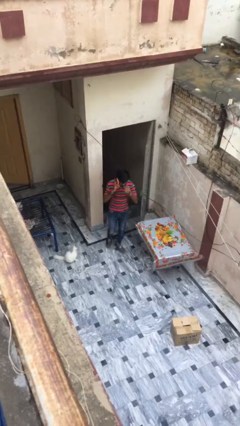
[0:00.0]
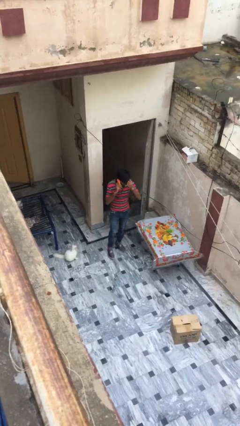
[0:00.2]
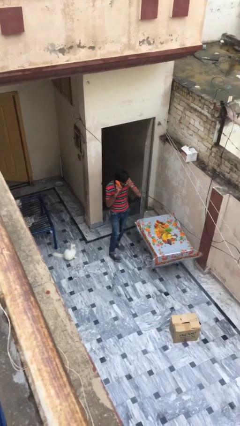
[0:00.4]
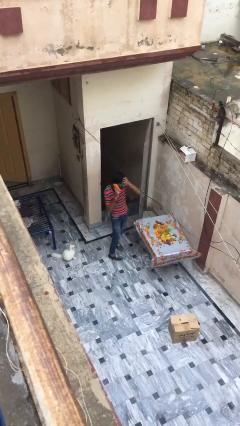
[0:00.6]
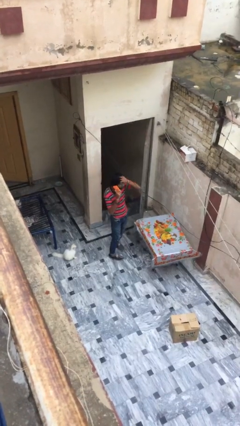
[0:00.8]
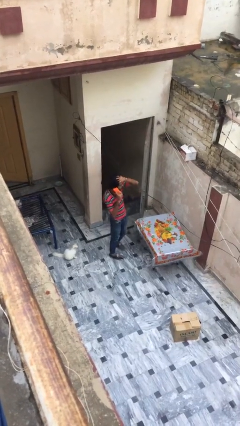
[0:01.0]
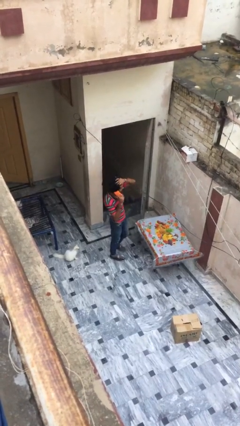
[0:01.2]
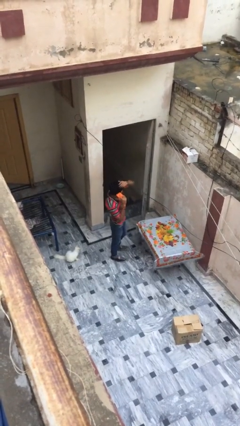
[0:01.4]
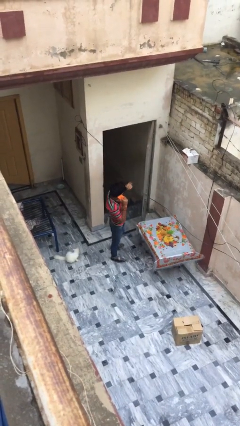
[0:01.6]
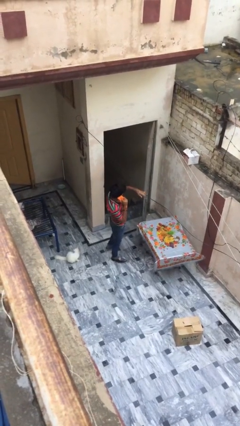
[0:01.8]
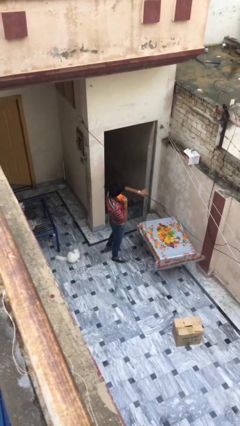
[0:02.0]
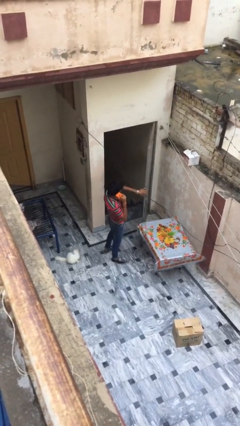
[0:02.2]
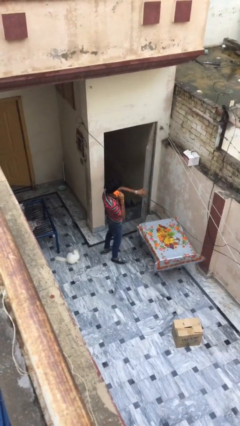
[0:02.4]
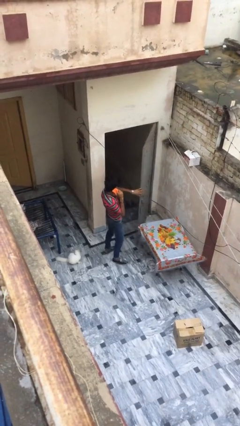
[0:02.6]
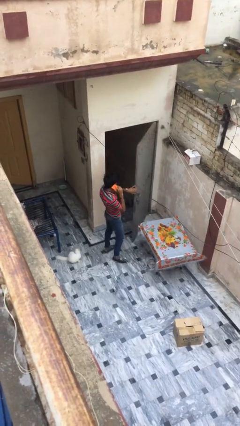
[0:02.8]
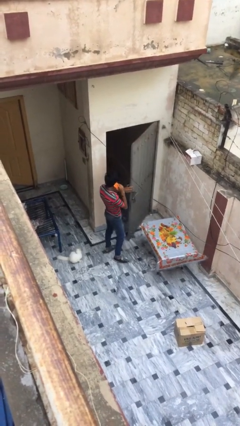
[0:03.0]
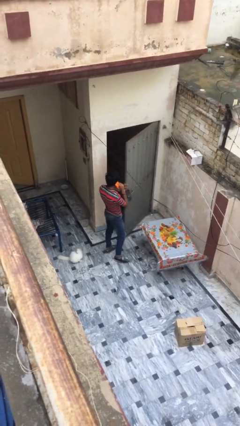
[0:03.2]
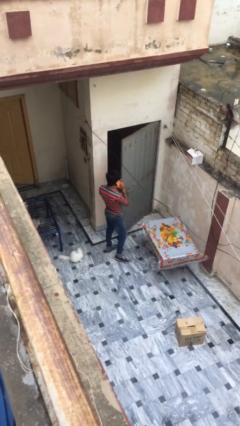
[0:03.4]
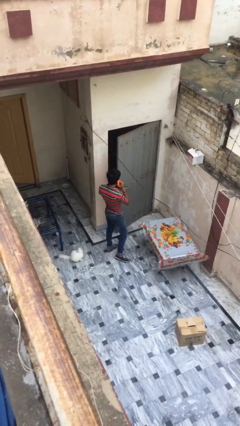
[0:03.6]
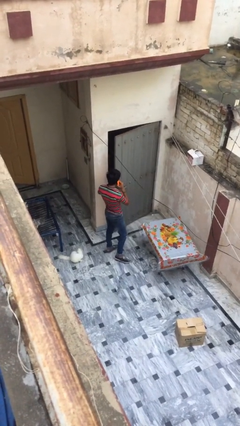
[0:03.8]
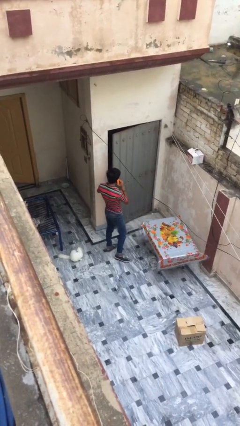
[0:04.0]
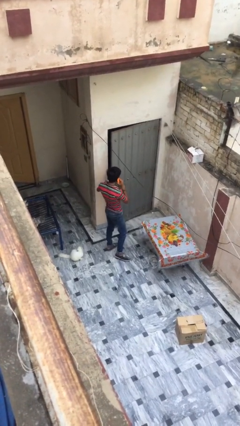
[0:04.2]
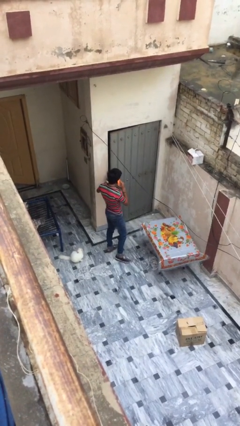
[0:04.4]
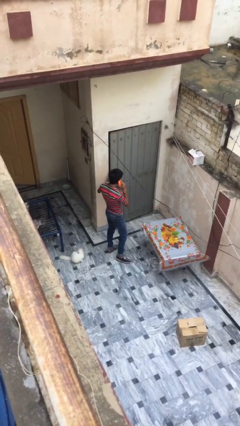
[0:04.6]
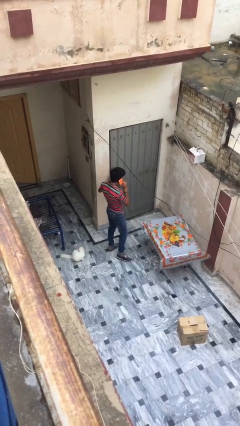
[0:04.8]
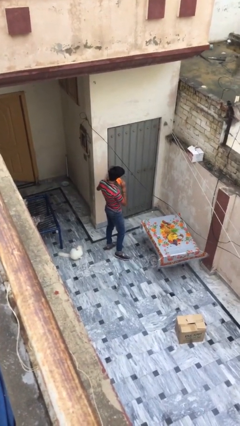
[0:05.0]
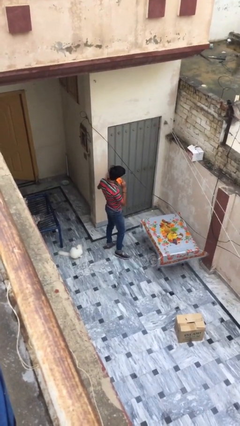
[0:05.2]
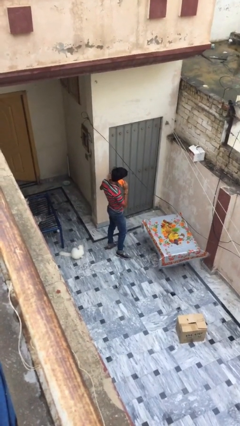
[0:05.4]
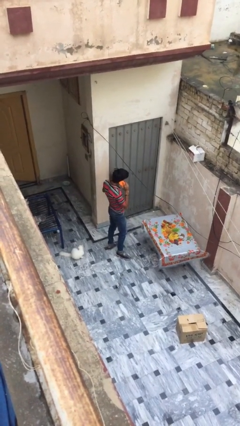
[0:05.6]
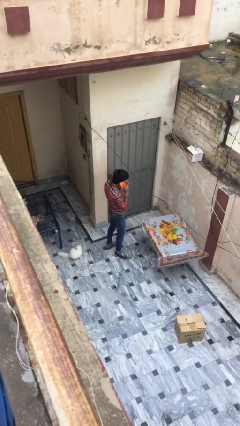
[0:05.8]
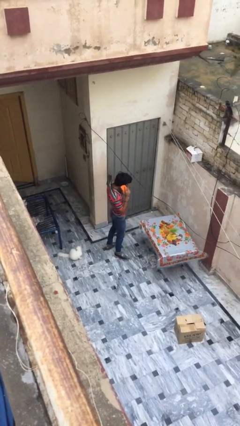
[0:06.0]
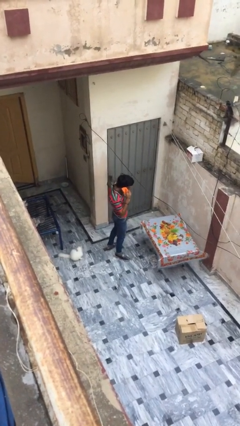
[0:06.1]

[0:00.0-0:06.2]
person closes facility door

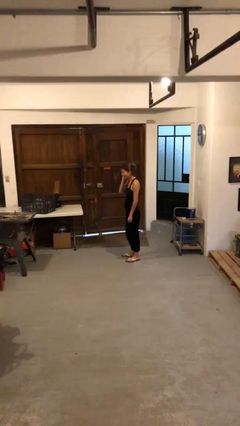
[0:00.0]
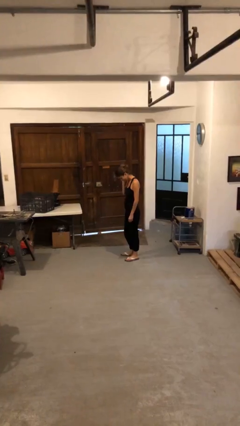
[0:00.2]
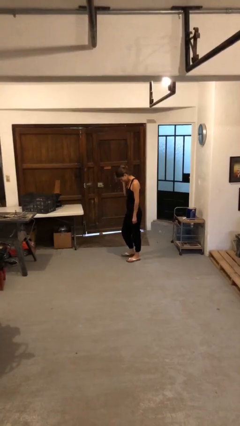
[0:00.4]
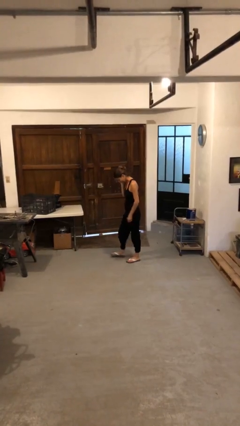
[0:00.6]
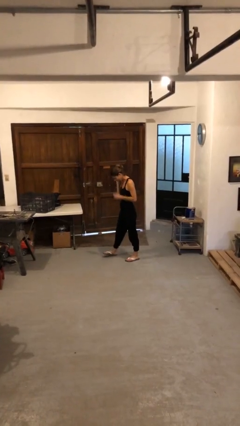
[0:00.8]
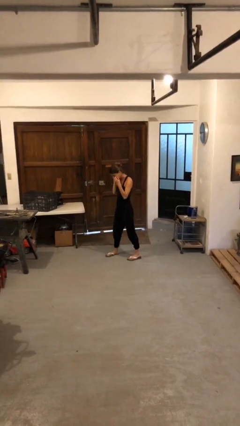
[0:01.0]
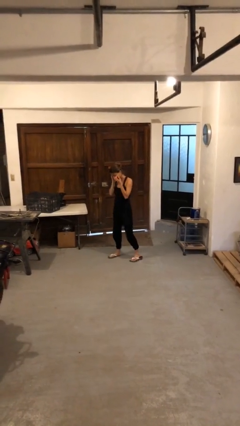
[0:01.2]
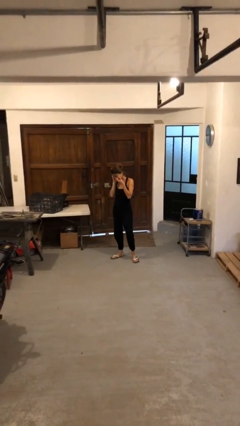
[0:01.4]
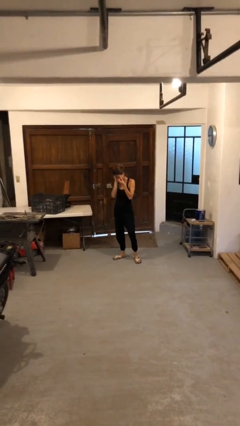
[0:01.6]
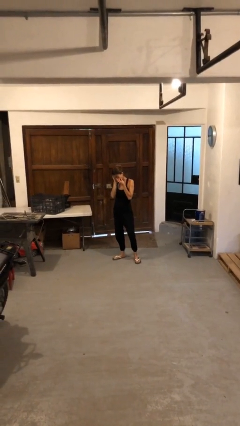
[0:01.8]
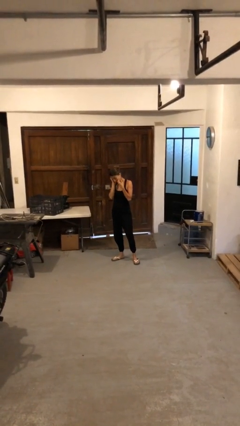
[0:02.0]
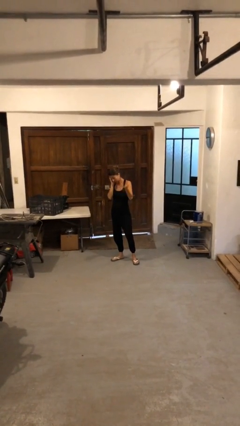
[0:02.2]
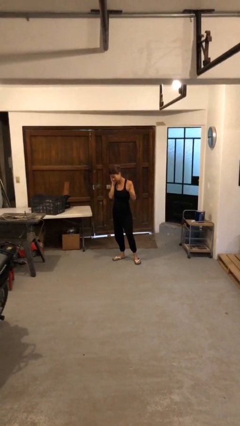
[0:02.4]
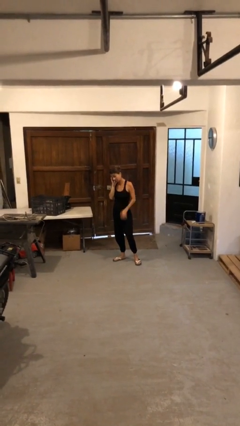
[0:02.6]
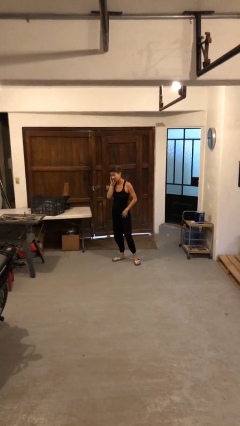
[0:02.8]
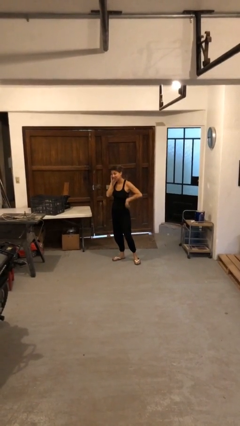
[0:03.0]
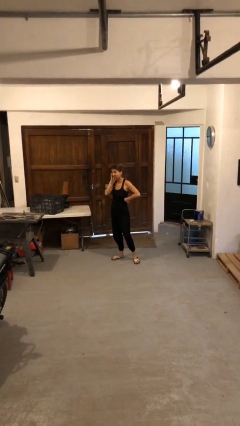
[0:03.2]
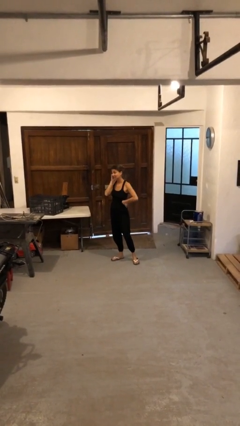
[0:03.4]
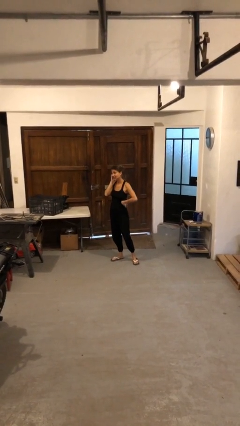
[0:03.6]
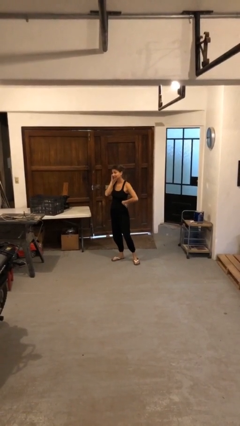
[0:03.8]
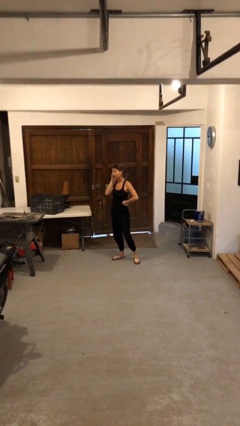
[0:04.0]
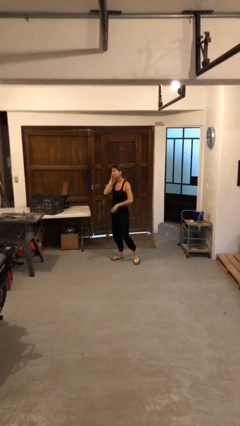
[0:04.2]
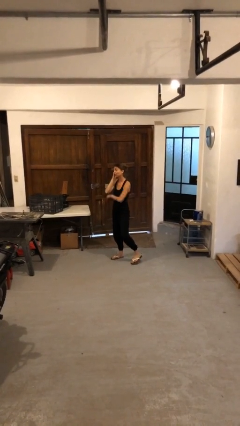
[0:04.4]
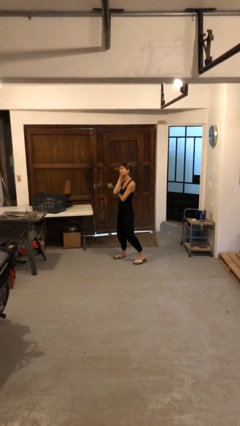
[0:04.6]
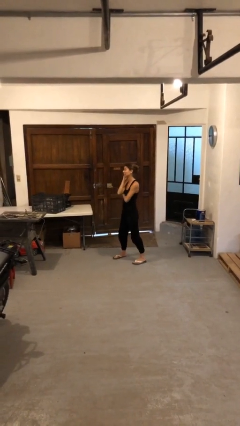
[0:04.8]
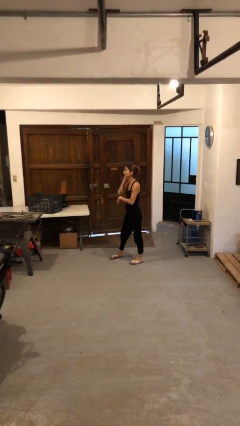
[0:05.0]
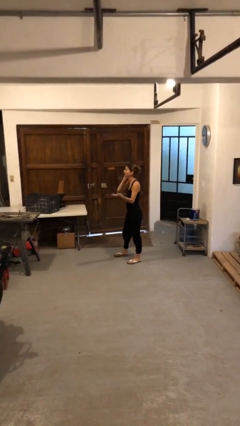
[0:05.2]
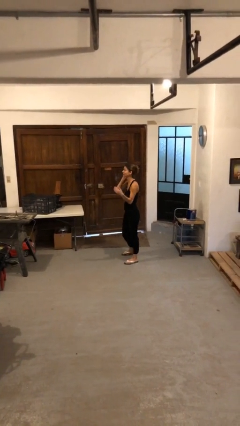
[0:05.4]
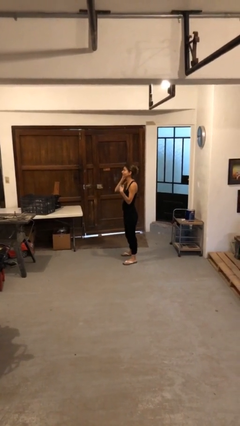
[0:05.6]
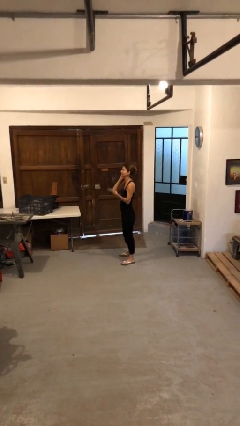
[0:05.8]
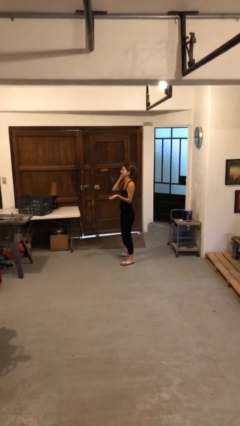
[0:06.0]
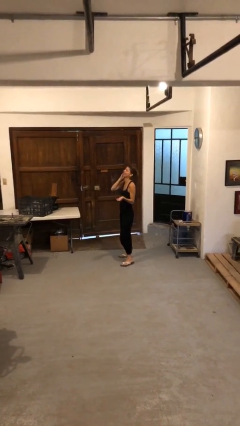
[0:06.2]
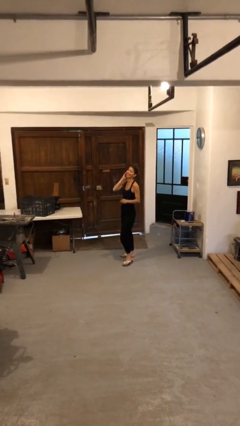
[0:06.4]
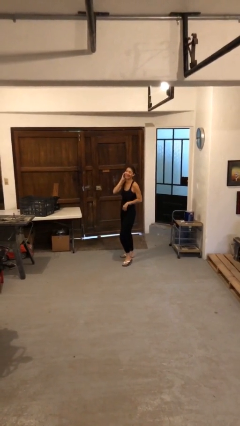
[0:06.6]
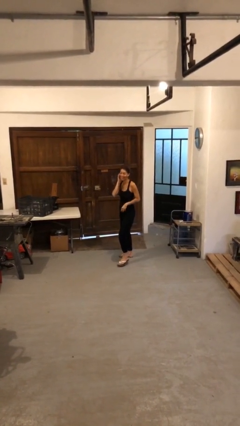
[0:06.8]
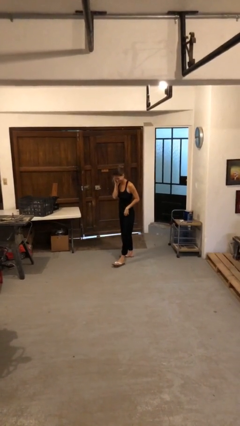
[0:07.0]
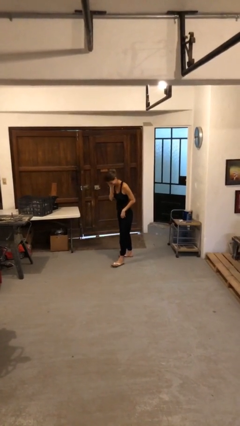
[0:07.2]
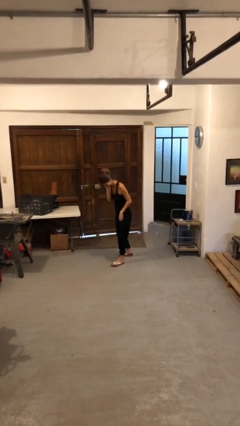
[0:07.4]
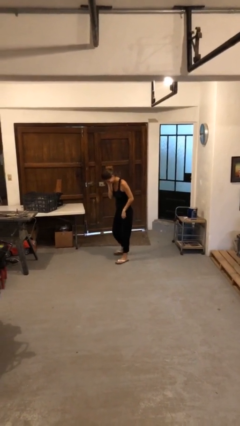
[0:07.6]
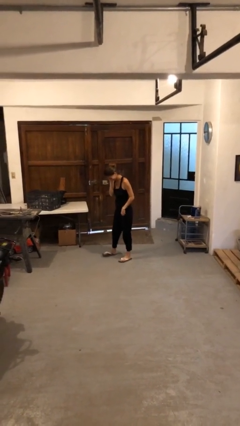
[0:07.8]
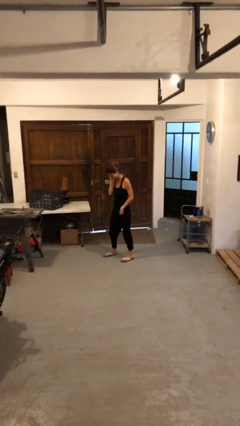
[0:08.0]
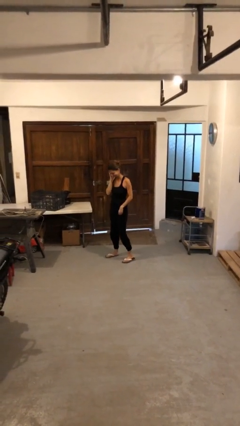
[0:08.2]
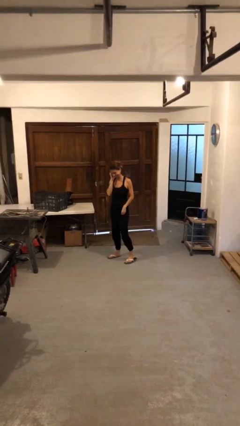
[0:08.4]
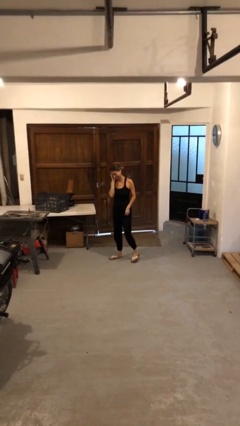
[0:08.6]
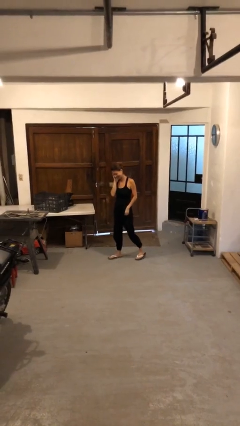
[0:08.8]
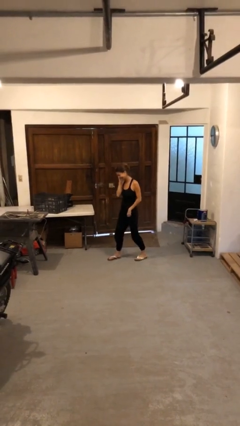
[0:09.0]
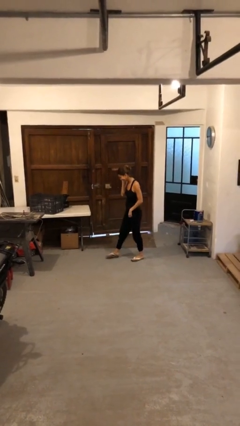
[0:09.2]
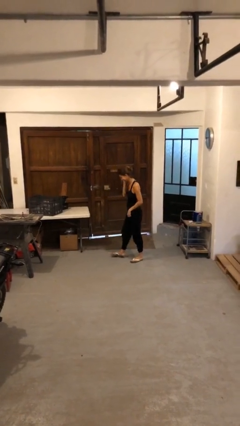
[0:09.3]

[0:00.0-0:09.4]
person talks on phone

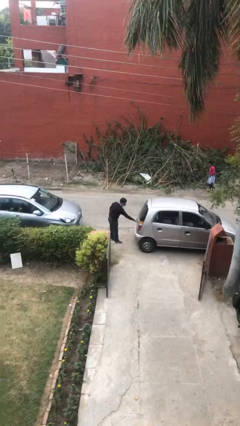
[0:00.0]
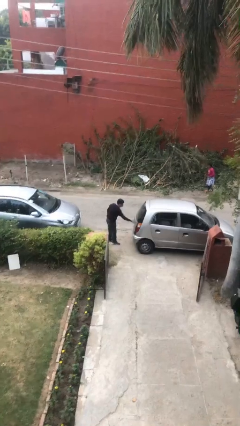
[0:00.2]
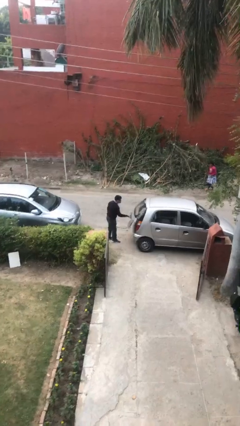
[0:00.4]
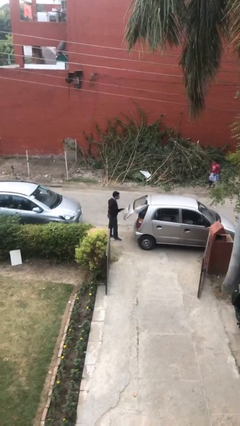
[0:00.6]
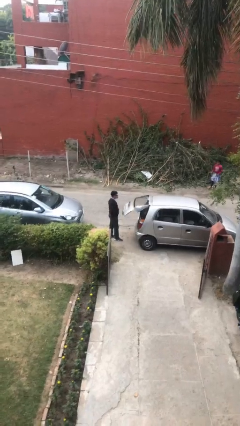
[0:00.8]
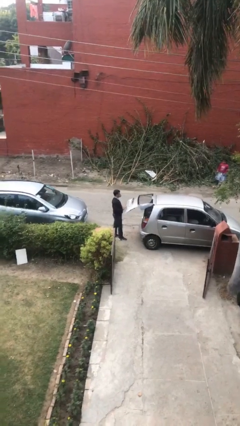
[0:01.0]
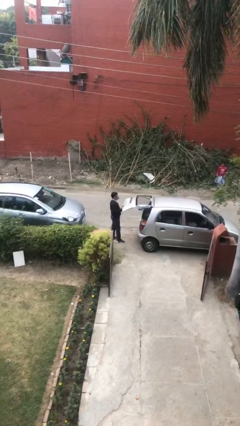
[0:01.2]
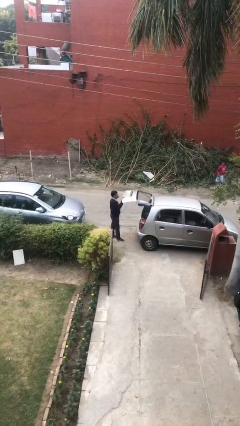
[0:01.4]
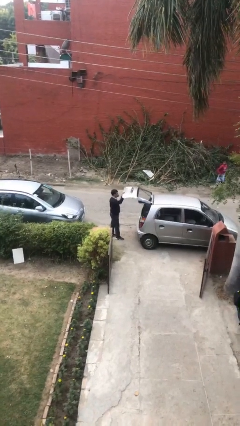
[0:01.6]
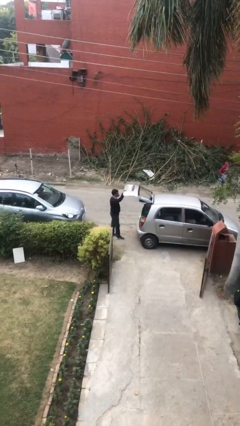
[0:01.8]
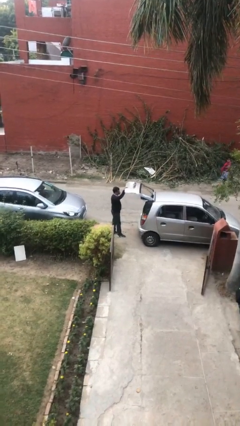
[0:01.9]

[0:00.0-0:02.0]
person opens car trunk

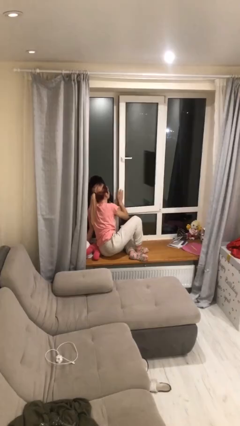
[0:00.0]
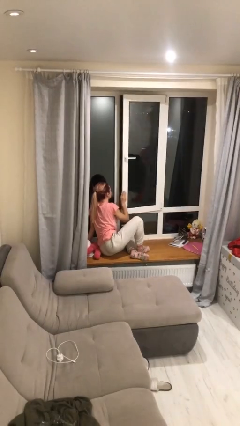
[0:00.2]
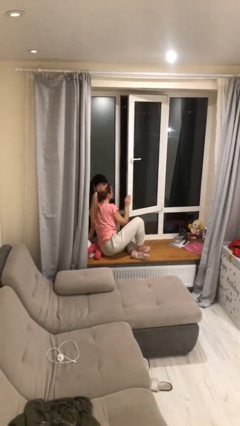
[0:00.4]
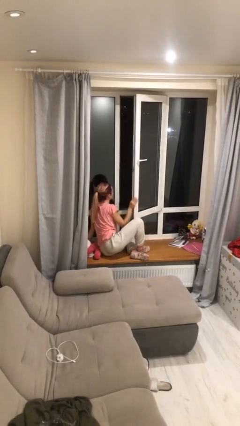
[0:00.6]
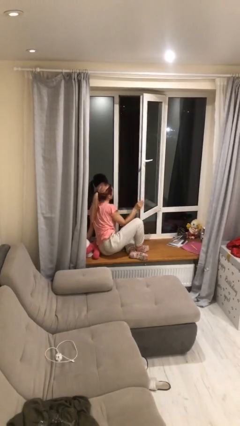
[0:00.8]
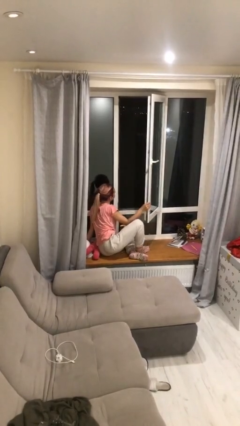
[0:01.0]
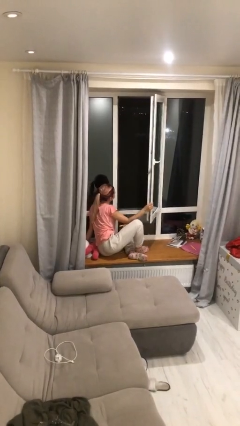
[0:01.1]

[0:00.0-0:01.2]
person opens home window
